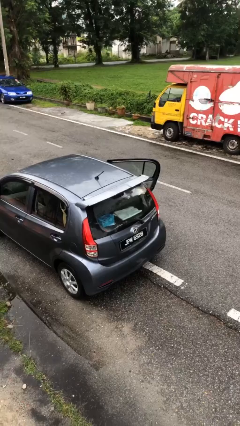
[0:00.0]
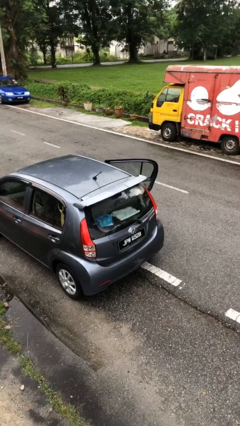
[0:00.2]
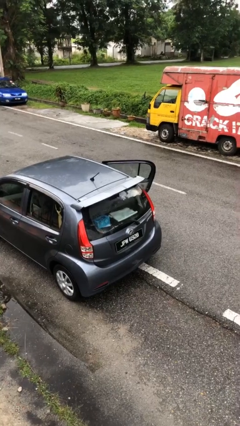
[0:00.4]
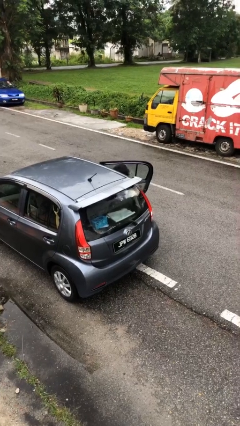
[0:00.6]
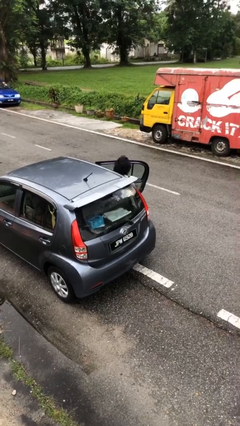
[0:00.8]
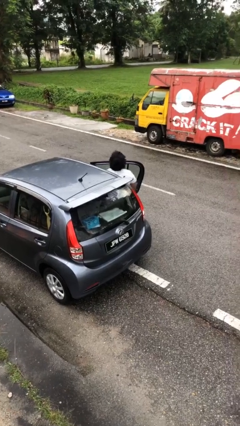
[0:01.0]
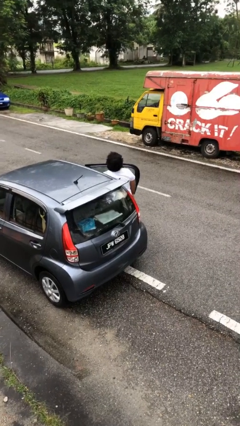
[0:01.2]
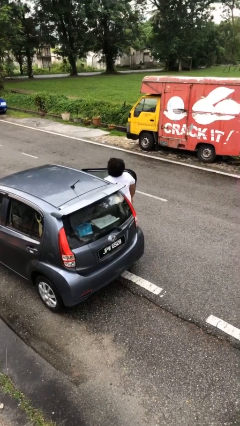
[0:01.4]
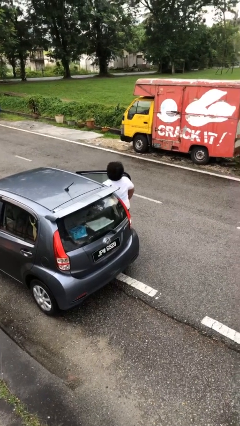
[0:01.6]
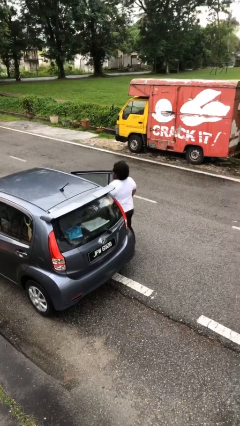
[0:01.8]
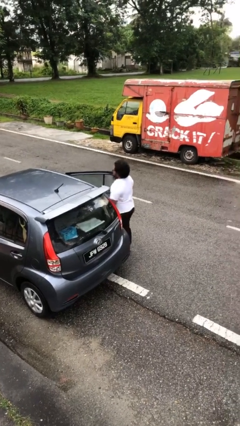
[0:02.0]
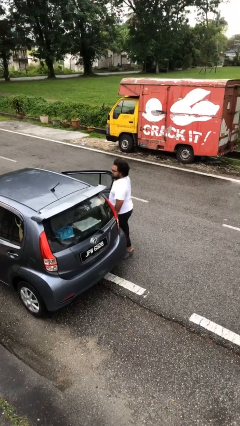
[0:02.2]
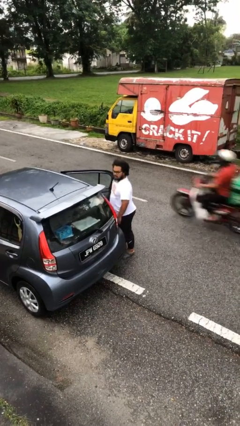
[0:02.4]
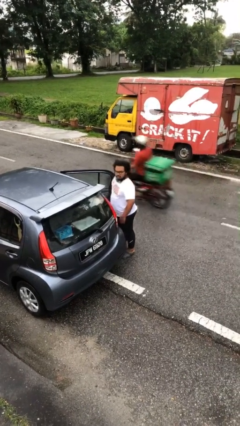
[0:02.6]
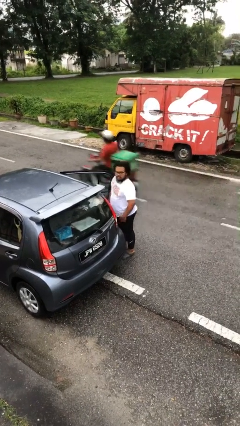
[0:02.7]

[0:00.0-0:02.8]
person exits car

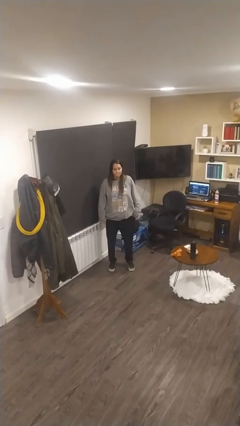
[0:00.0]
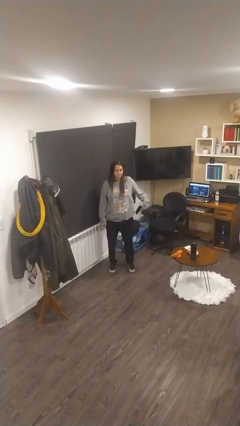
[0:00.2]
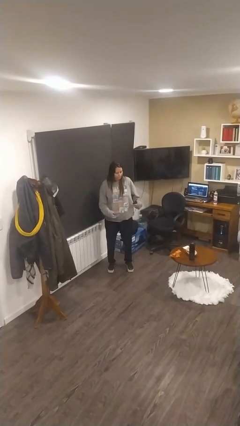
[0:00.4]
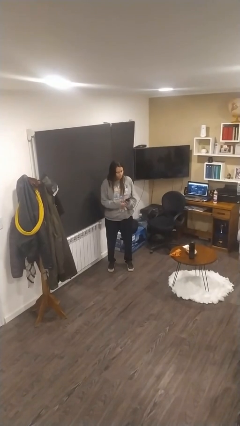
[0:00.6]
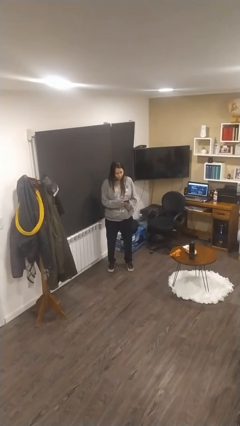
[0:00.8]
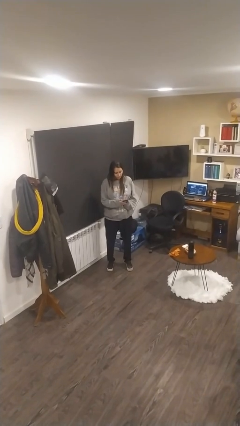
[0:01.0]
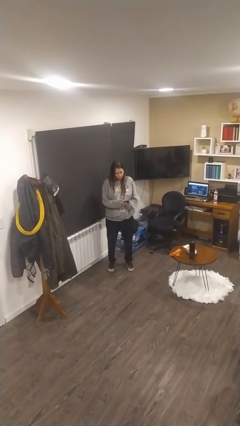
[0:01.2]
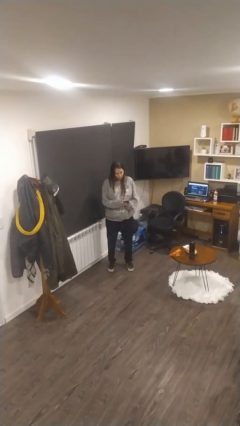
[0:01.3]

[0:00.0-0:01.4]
person takes phone from pocket

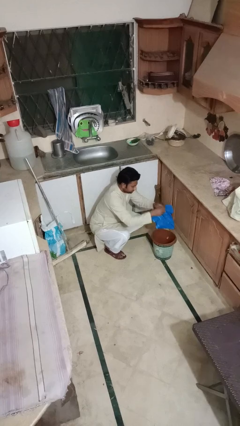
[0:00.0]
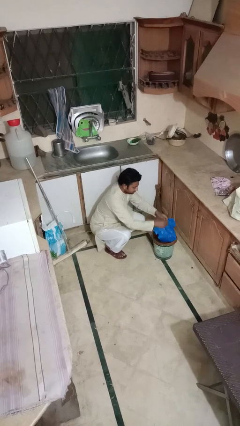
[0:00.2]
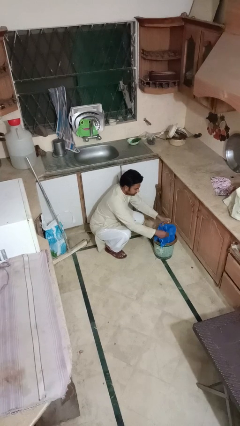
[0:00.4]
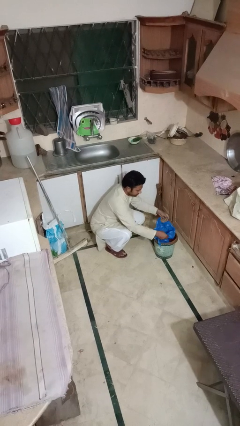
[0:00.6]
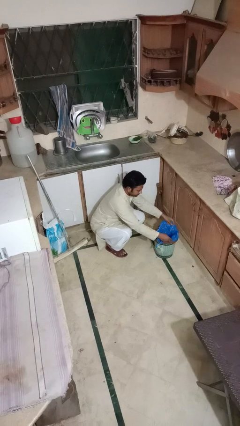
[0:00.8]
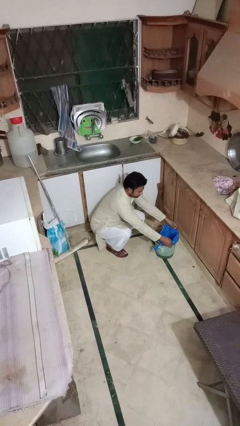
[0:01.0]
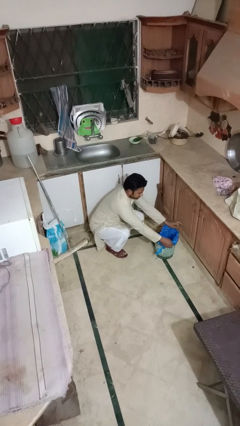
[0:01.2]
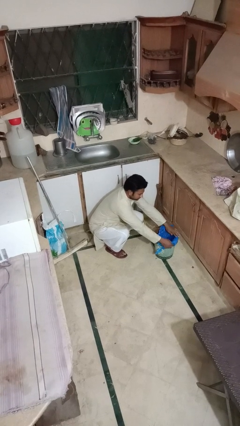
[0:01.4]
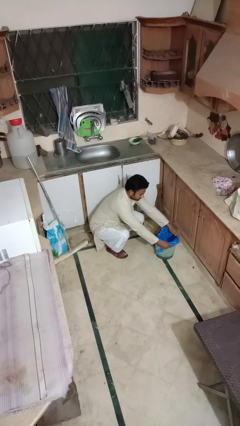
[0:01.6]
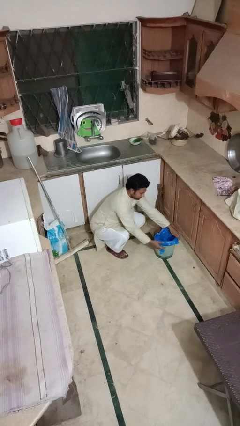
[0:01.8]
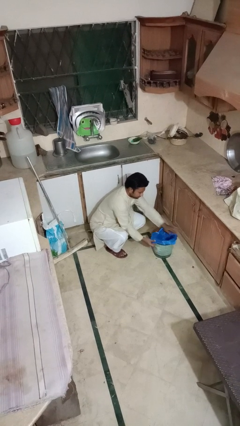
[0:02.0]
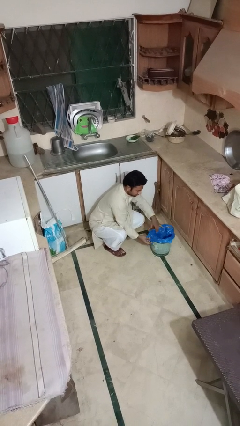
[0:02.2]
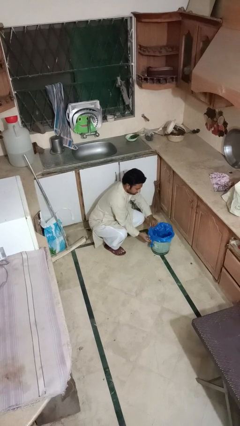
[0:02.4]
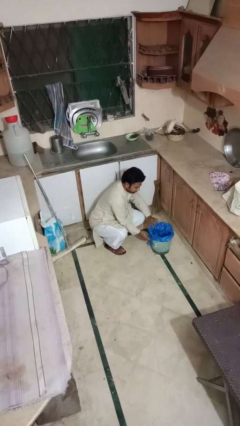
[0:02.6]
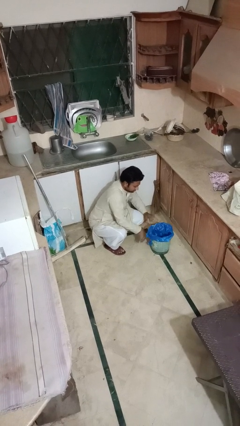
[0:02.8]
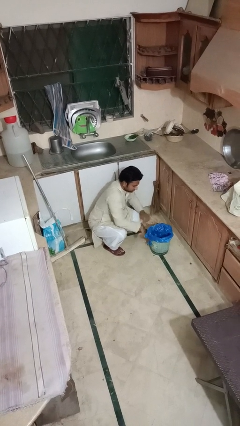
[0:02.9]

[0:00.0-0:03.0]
person inserts trashbag into trashcan

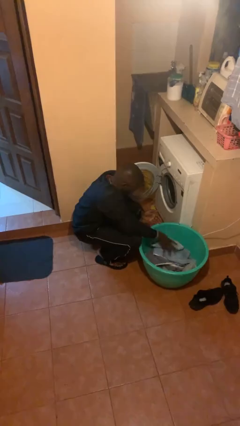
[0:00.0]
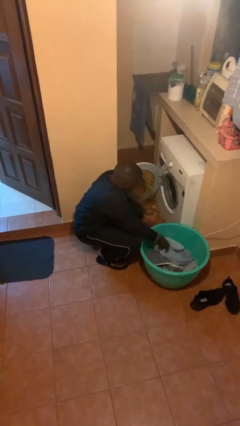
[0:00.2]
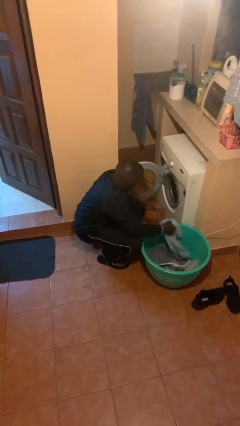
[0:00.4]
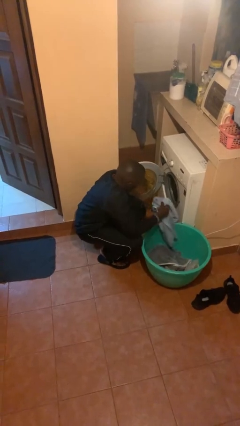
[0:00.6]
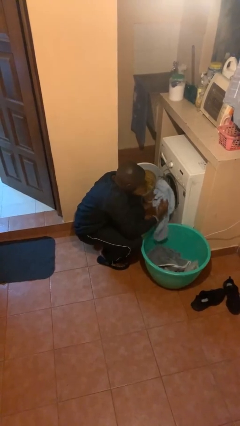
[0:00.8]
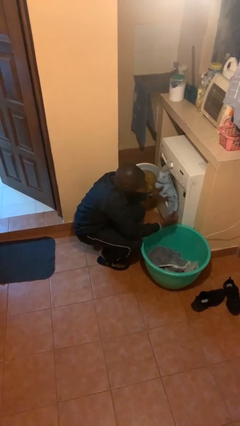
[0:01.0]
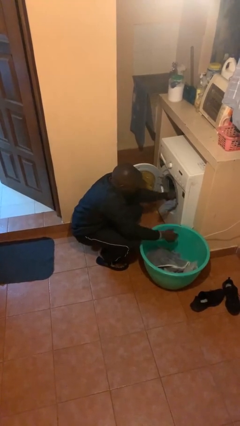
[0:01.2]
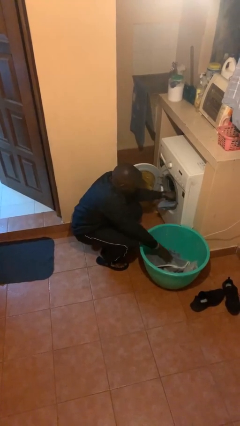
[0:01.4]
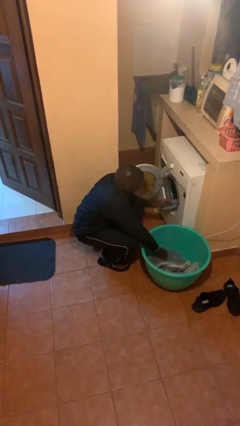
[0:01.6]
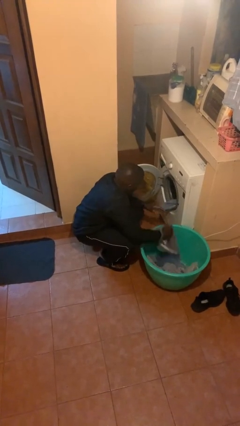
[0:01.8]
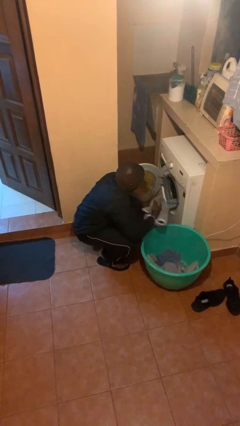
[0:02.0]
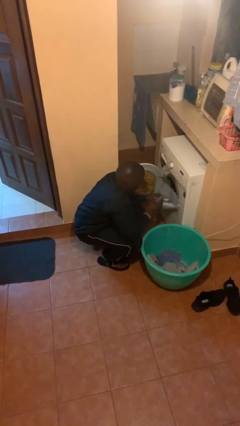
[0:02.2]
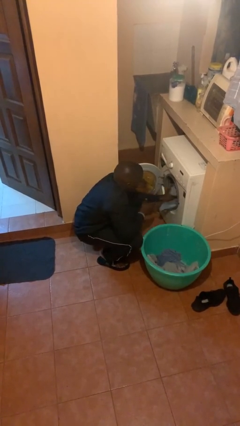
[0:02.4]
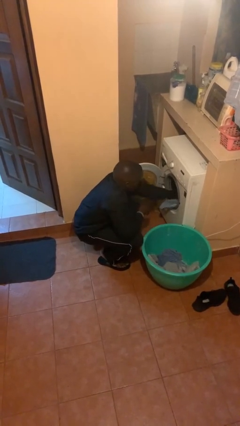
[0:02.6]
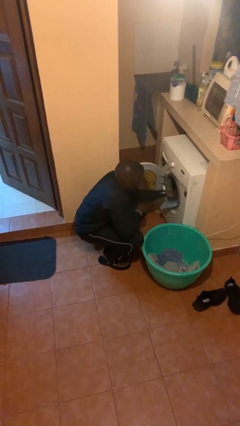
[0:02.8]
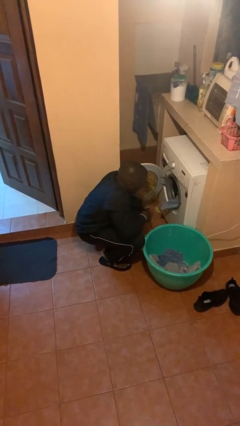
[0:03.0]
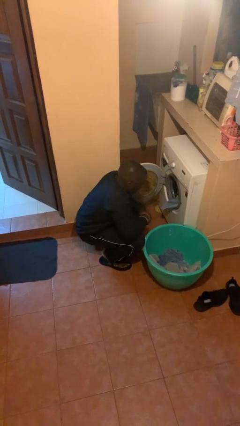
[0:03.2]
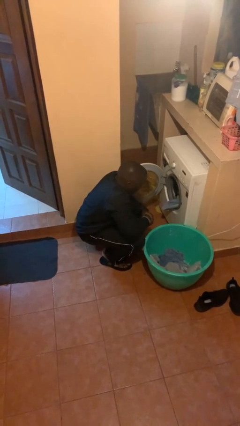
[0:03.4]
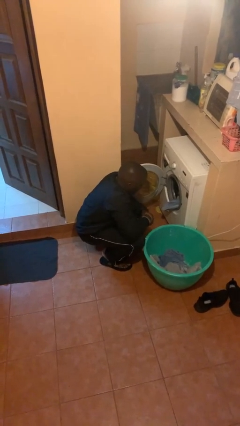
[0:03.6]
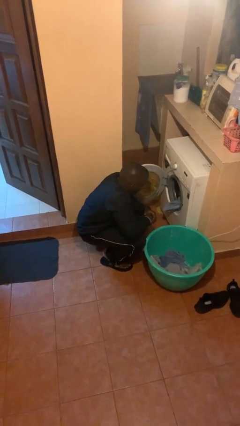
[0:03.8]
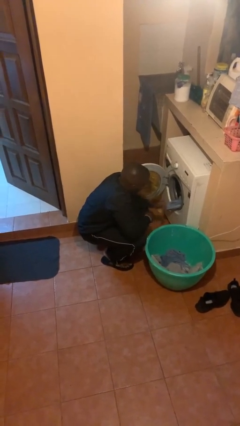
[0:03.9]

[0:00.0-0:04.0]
person loads clotheswasher

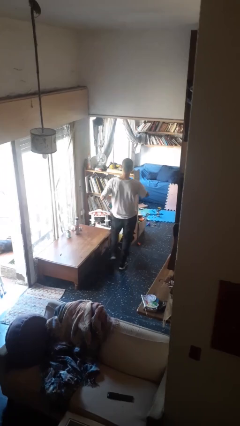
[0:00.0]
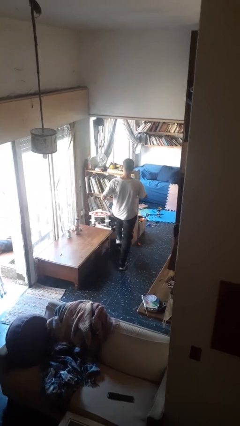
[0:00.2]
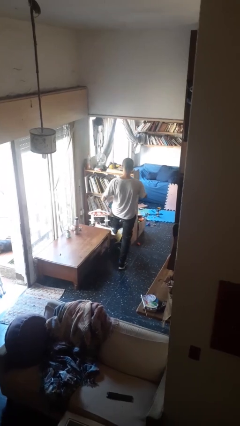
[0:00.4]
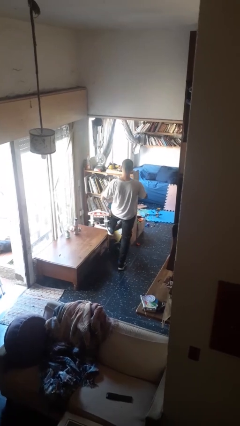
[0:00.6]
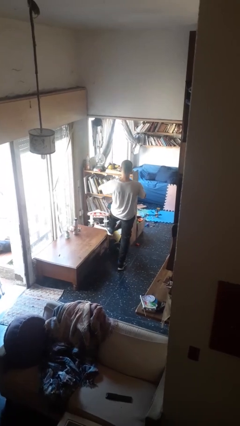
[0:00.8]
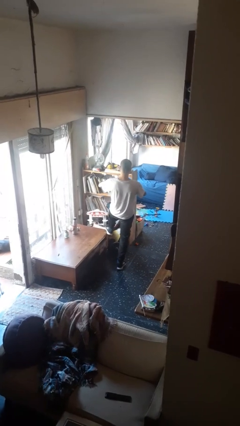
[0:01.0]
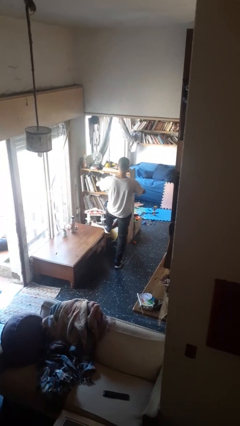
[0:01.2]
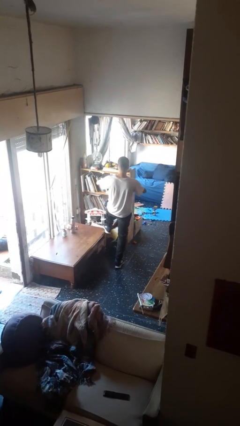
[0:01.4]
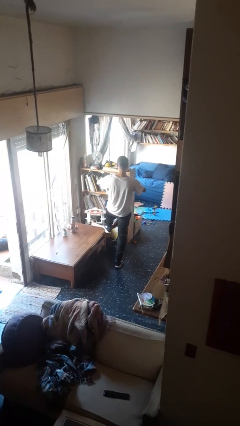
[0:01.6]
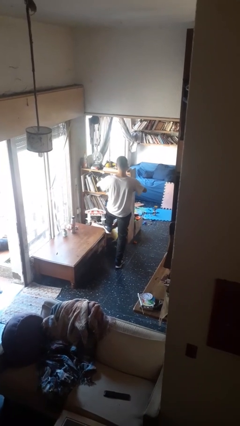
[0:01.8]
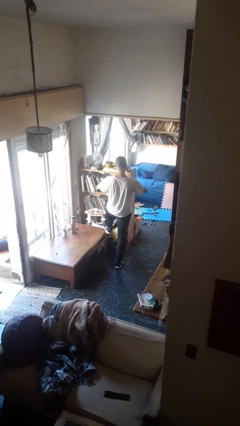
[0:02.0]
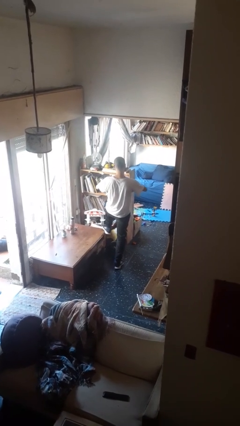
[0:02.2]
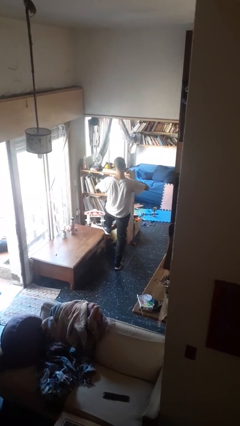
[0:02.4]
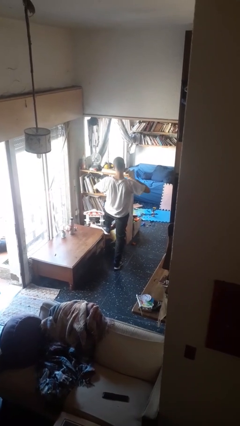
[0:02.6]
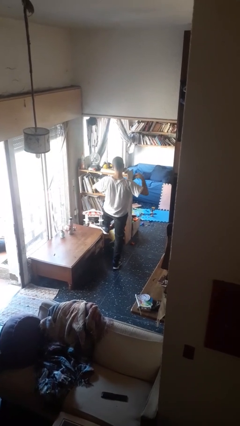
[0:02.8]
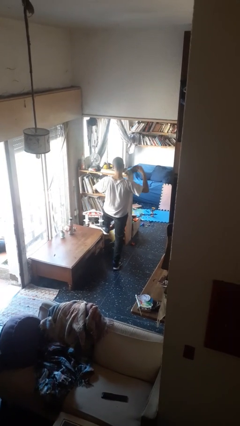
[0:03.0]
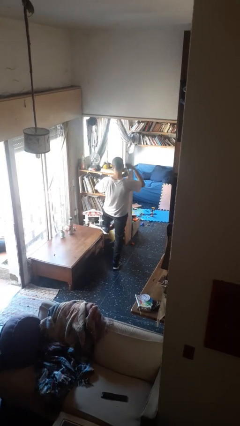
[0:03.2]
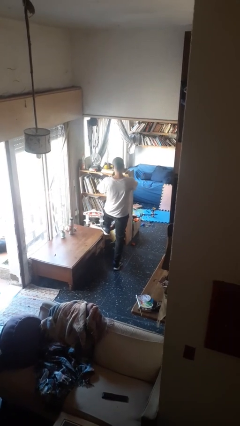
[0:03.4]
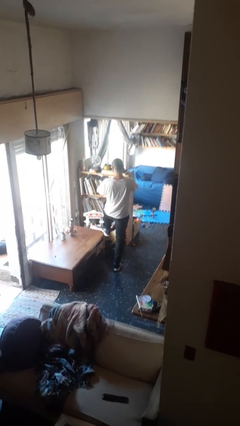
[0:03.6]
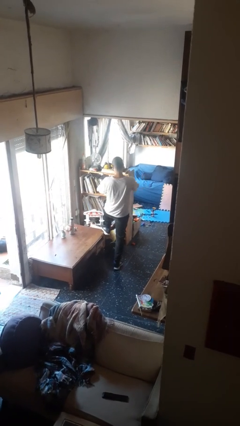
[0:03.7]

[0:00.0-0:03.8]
person tears paper

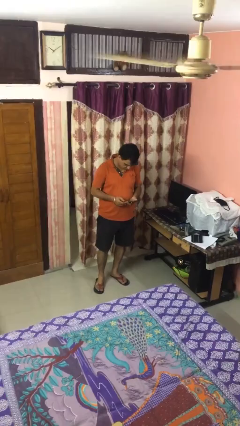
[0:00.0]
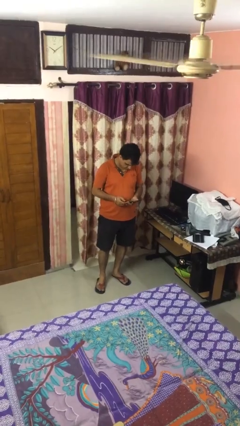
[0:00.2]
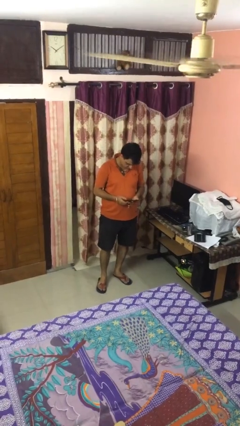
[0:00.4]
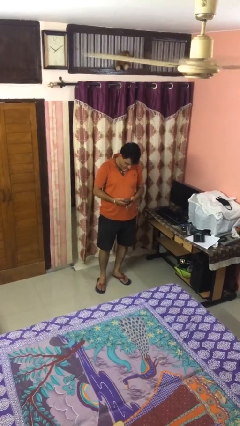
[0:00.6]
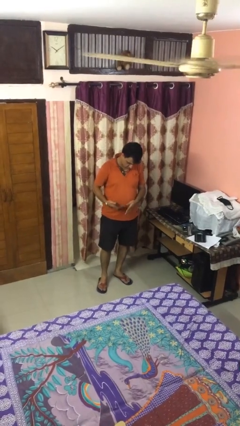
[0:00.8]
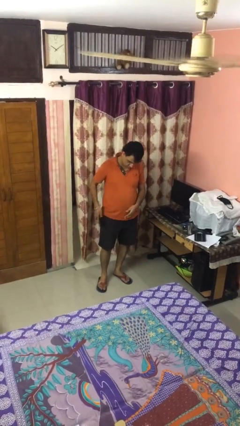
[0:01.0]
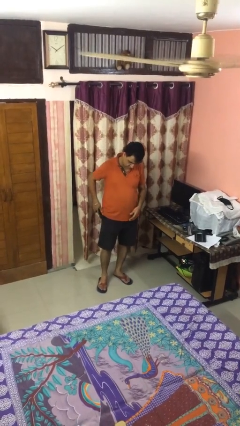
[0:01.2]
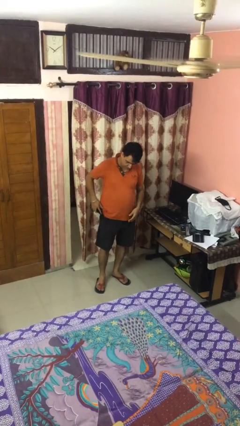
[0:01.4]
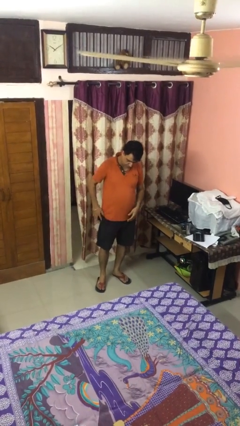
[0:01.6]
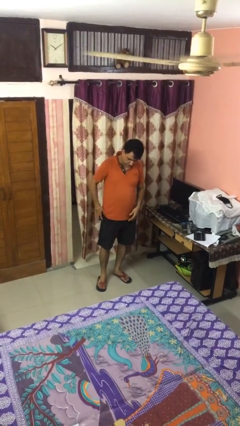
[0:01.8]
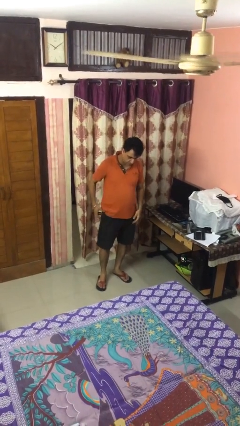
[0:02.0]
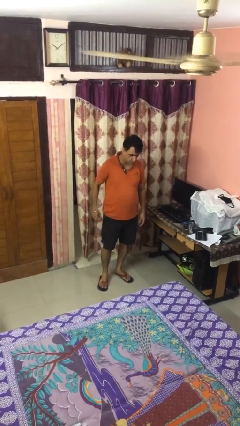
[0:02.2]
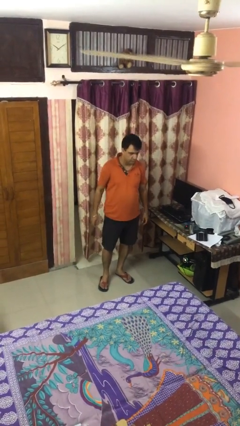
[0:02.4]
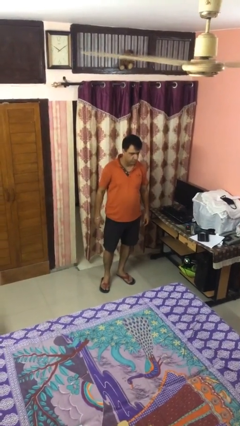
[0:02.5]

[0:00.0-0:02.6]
person puts phone into pocket

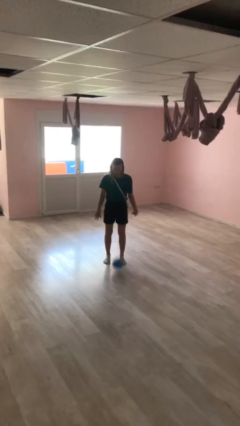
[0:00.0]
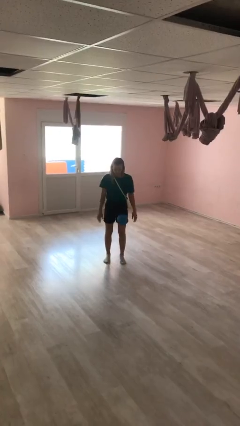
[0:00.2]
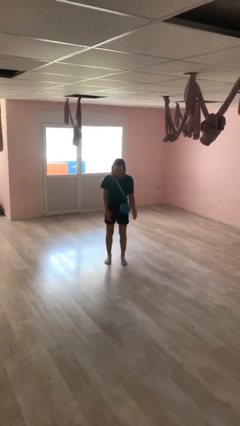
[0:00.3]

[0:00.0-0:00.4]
person bounces ball on floor
